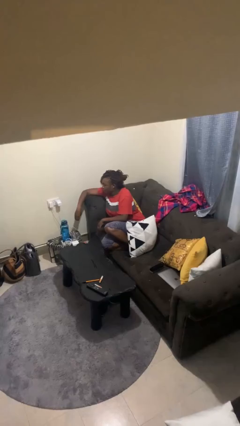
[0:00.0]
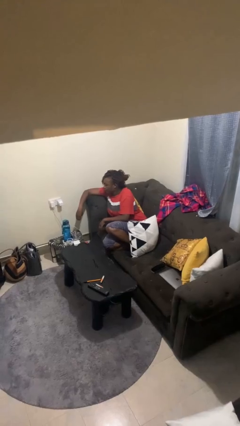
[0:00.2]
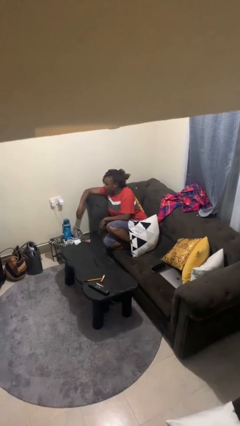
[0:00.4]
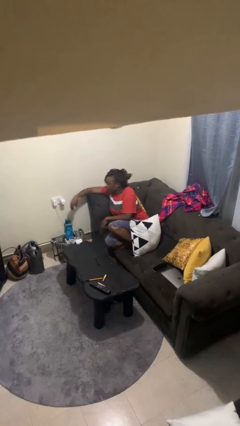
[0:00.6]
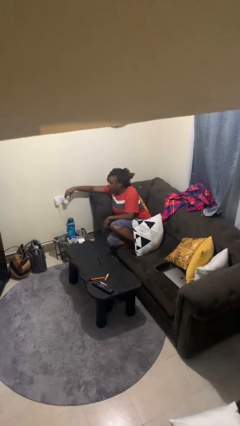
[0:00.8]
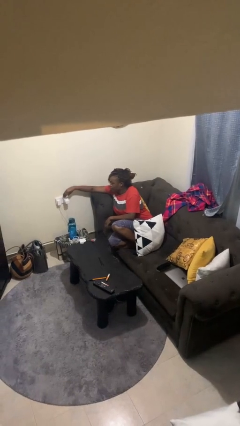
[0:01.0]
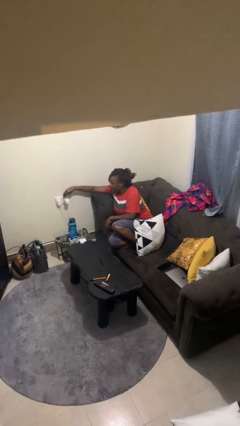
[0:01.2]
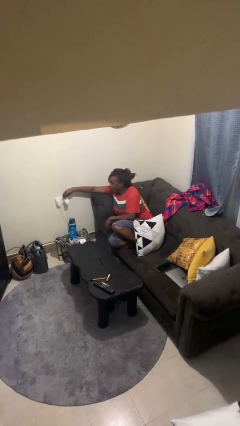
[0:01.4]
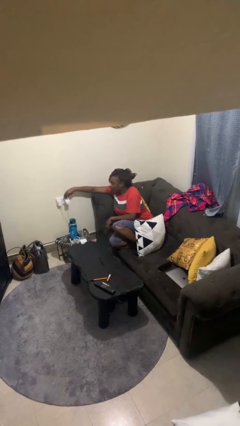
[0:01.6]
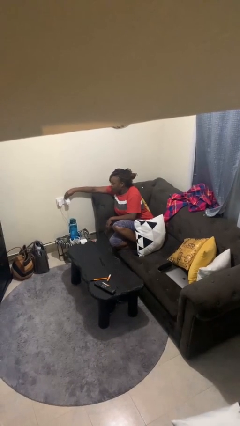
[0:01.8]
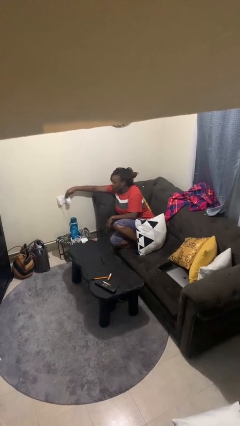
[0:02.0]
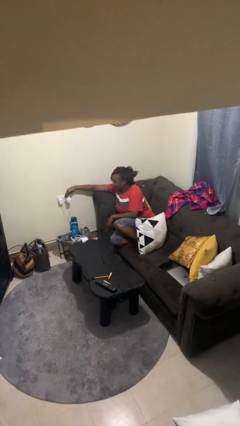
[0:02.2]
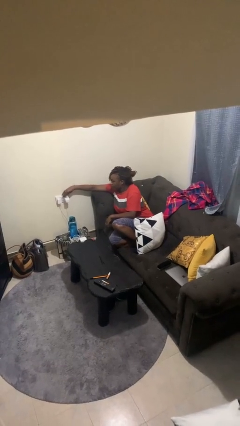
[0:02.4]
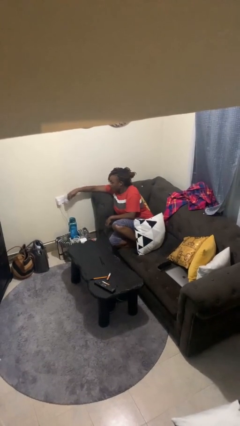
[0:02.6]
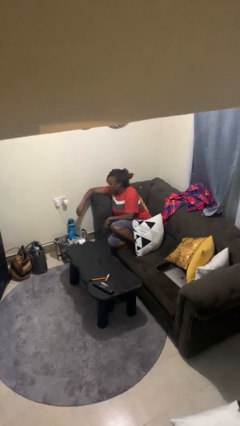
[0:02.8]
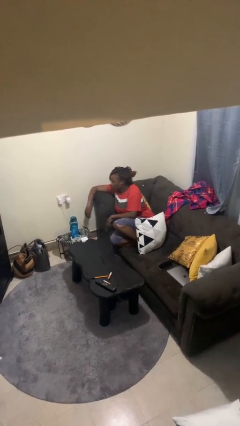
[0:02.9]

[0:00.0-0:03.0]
person plugs into electrical socket

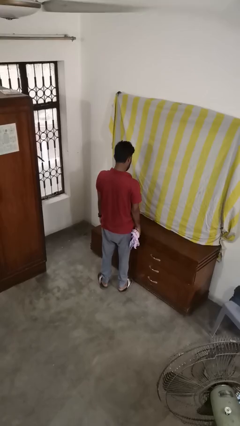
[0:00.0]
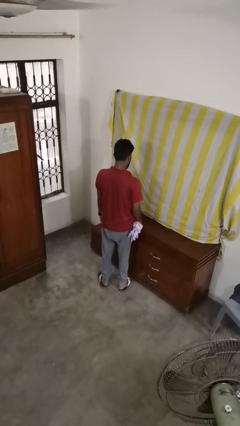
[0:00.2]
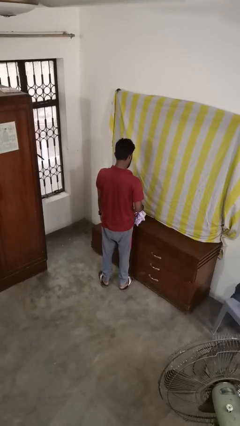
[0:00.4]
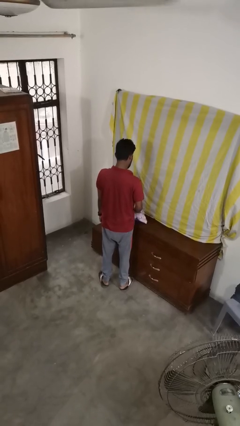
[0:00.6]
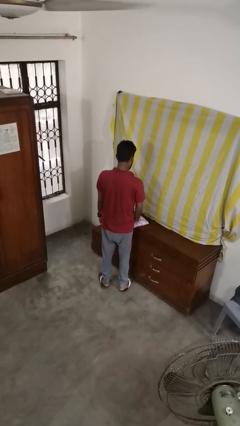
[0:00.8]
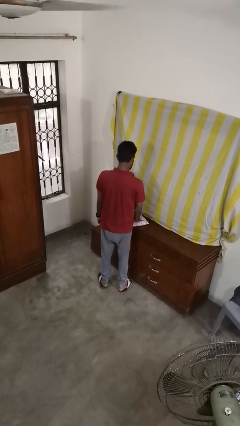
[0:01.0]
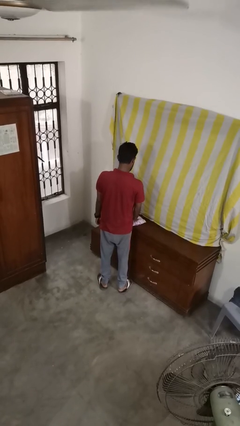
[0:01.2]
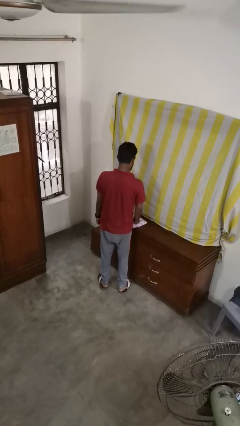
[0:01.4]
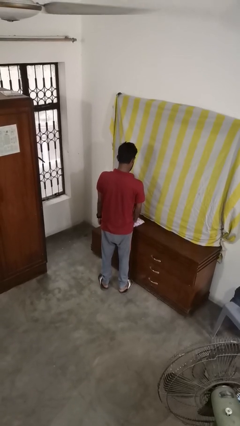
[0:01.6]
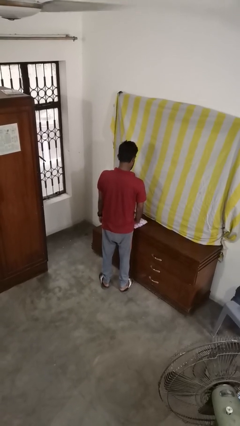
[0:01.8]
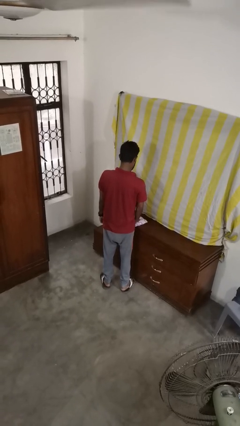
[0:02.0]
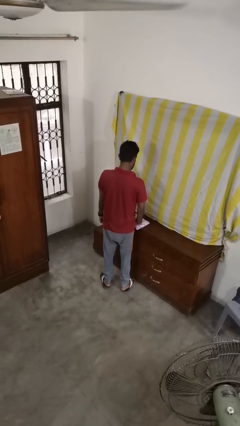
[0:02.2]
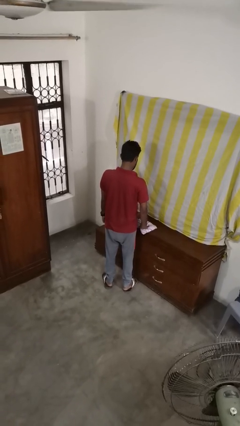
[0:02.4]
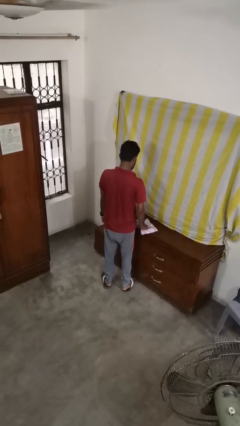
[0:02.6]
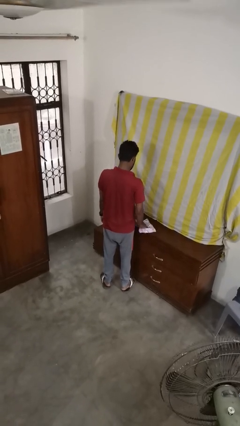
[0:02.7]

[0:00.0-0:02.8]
person cleans table with rag

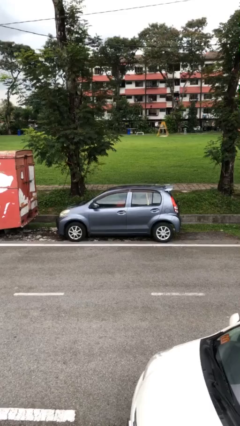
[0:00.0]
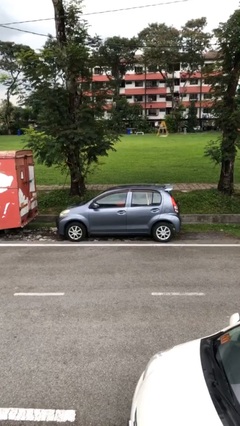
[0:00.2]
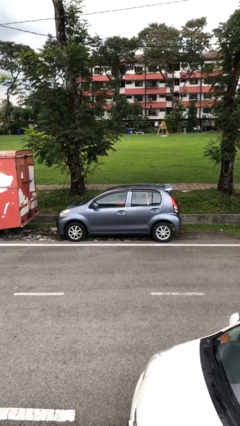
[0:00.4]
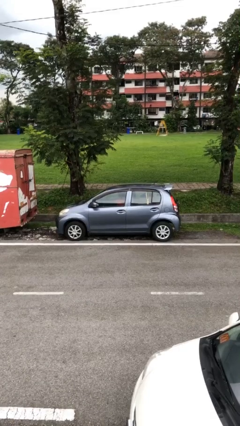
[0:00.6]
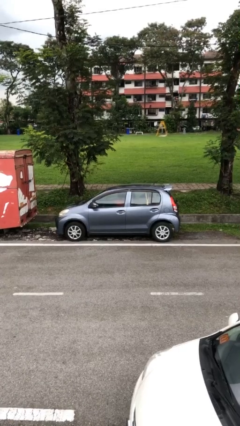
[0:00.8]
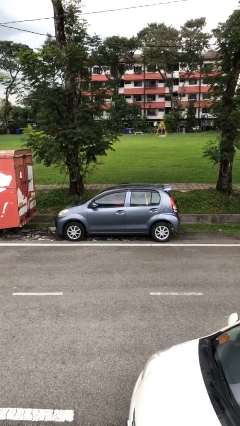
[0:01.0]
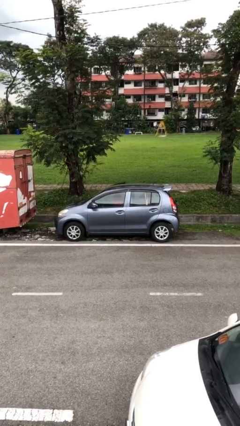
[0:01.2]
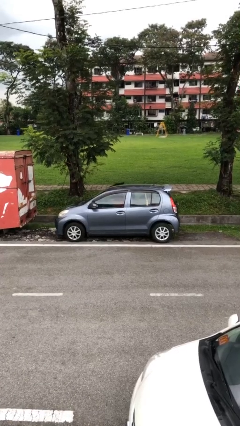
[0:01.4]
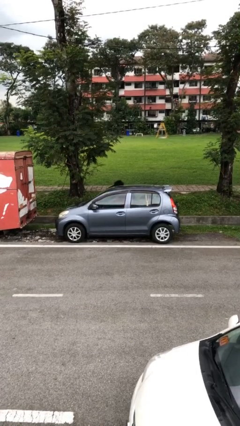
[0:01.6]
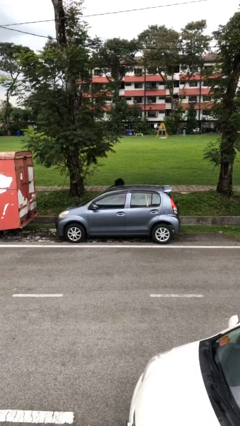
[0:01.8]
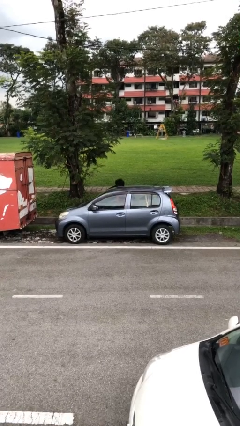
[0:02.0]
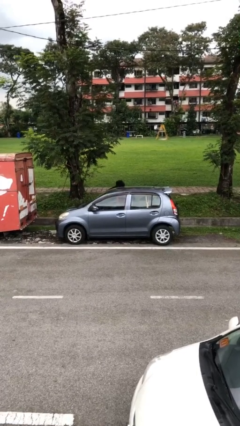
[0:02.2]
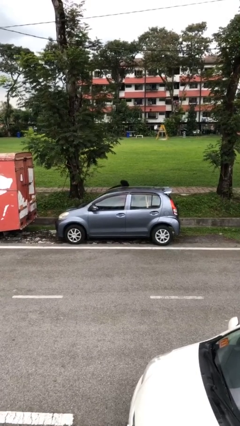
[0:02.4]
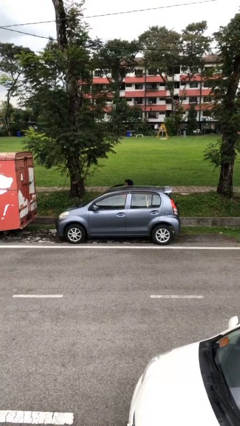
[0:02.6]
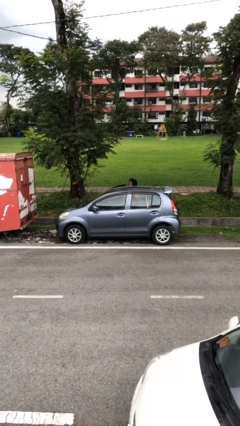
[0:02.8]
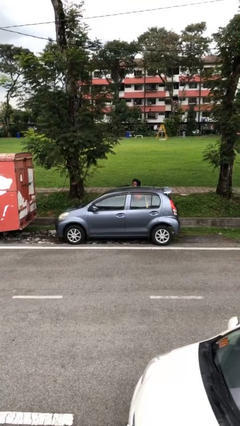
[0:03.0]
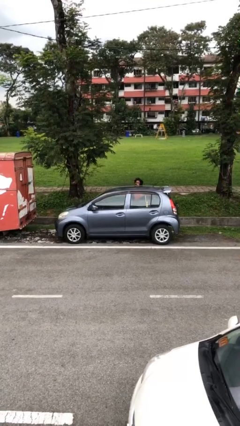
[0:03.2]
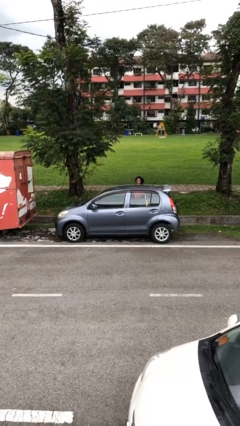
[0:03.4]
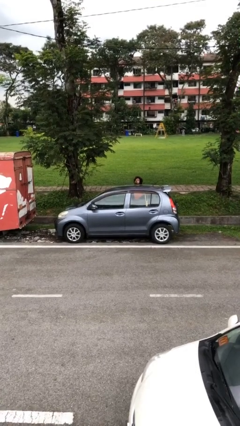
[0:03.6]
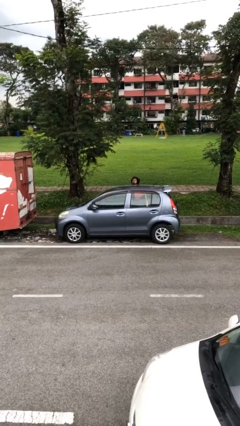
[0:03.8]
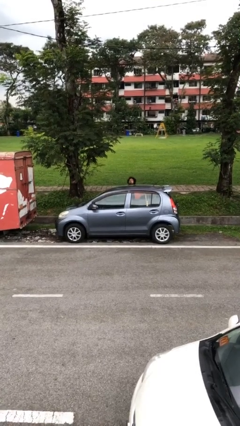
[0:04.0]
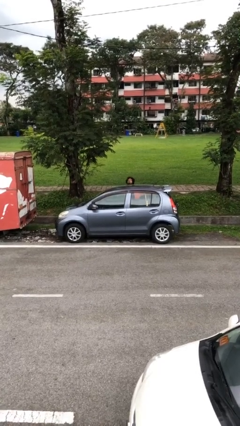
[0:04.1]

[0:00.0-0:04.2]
car drops off person

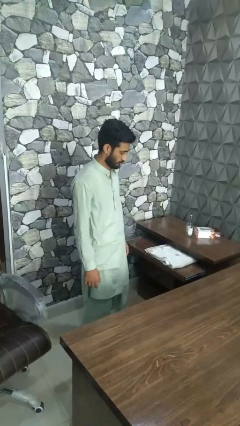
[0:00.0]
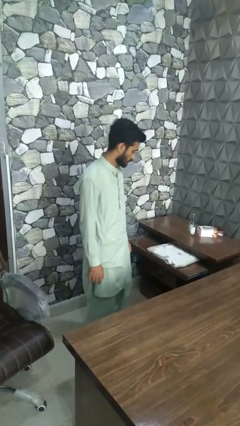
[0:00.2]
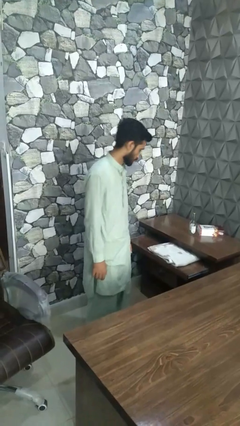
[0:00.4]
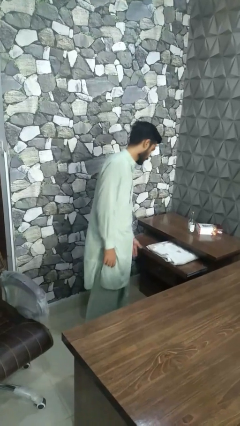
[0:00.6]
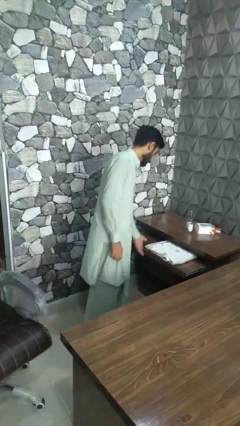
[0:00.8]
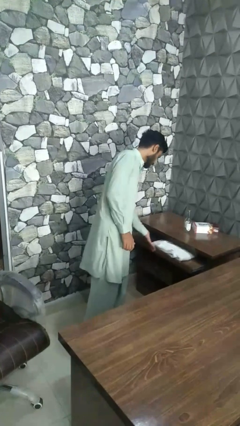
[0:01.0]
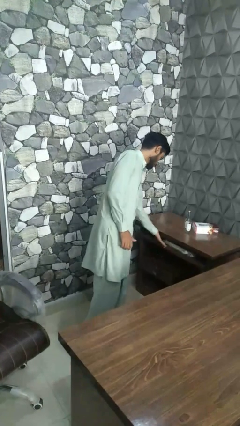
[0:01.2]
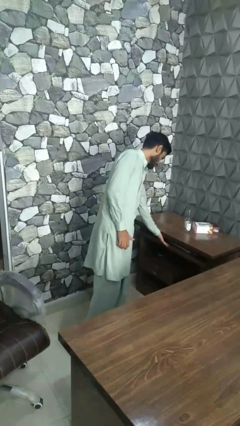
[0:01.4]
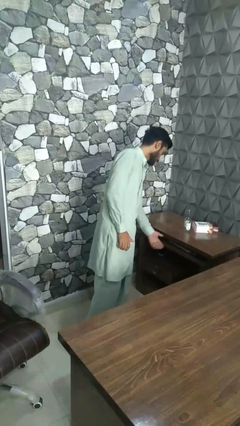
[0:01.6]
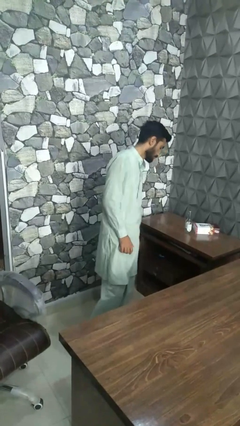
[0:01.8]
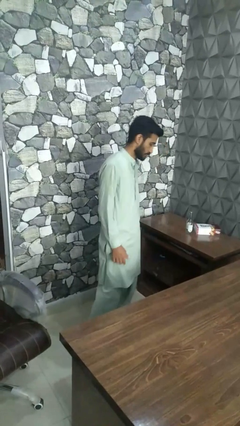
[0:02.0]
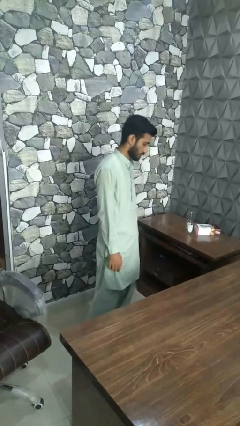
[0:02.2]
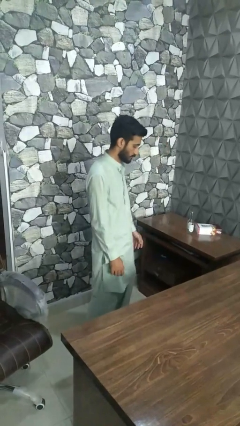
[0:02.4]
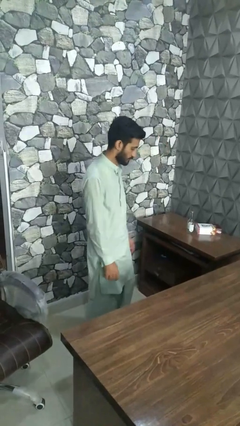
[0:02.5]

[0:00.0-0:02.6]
person closes dresser drawer

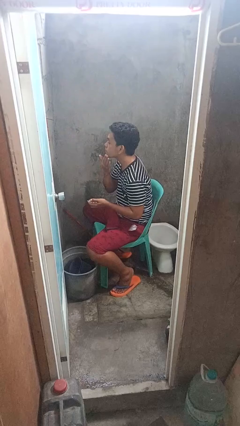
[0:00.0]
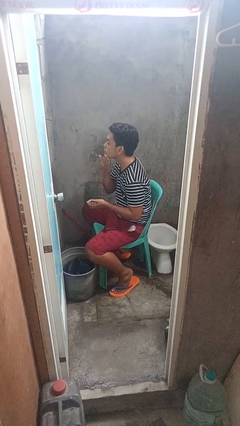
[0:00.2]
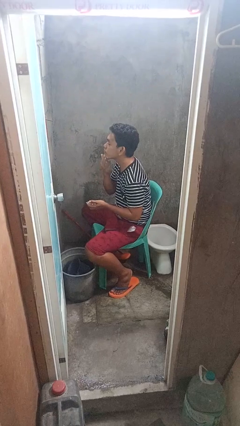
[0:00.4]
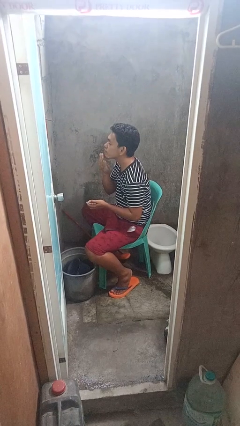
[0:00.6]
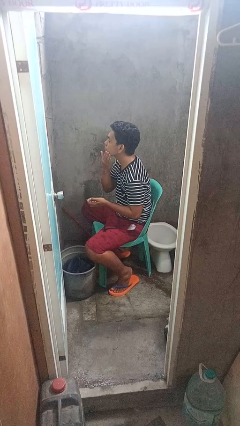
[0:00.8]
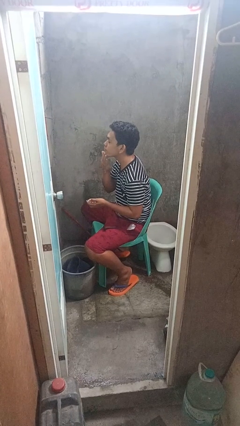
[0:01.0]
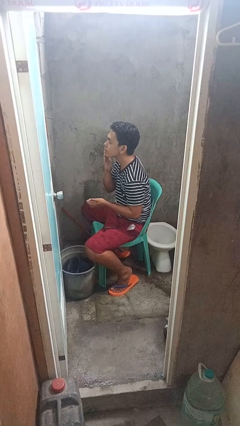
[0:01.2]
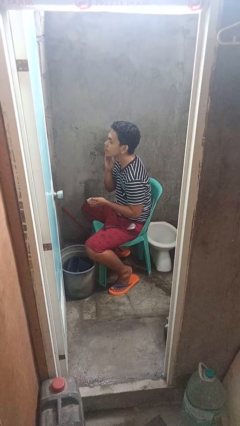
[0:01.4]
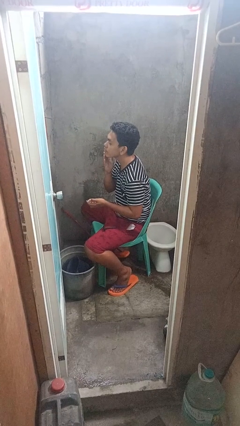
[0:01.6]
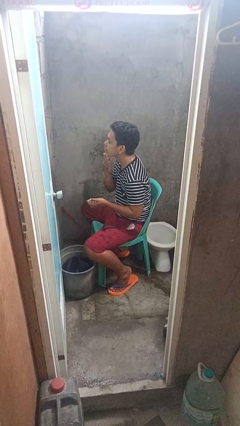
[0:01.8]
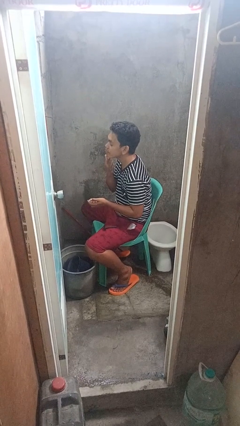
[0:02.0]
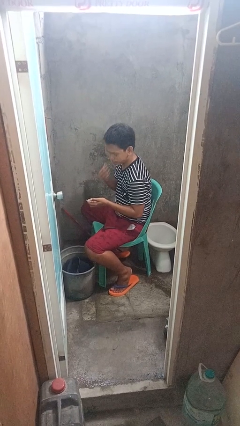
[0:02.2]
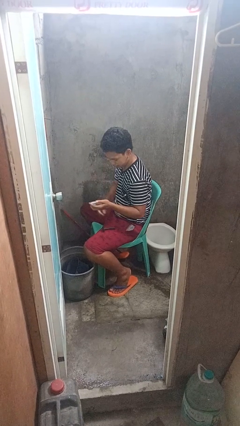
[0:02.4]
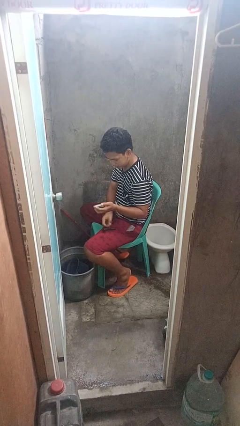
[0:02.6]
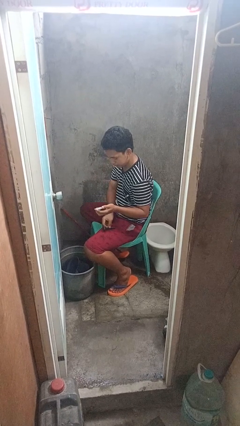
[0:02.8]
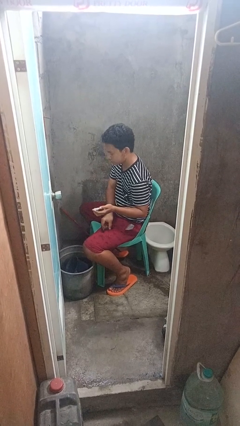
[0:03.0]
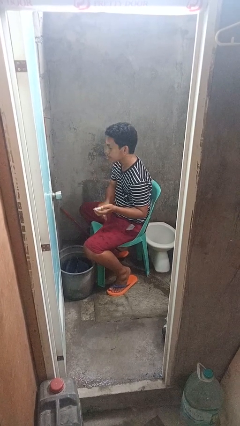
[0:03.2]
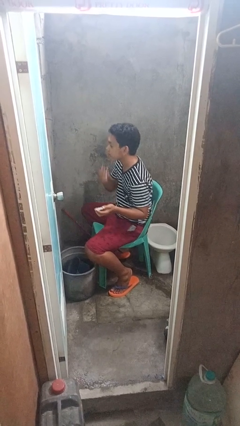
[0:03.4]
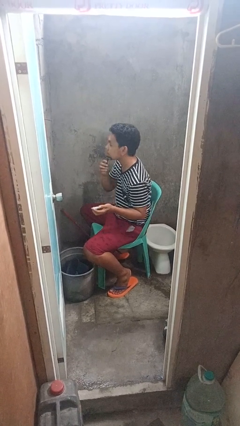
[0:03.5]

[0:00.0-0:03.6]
person applies shaving cream

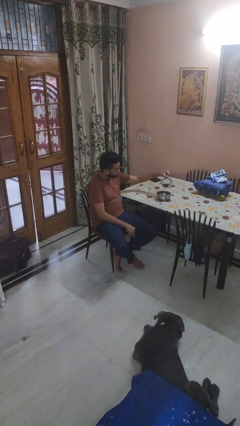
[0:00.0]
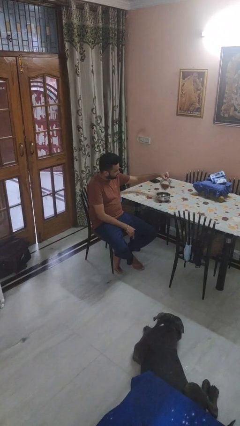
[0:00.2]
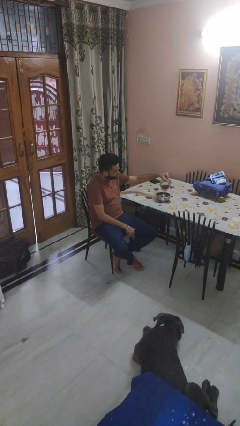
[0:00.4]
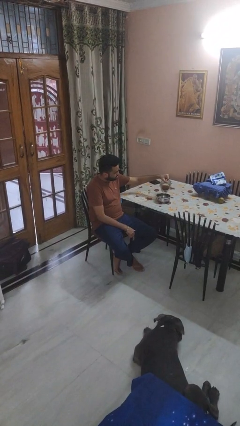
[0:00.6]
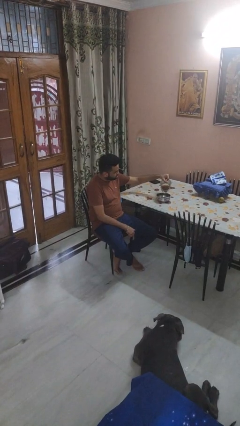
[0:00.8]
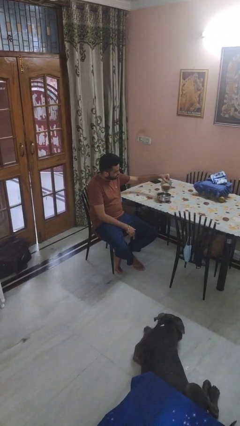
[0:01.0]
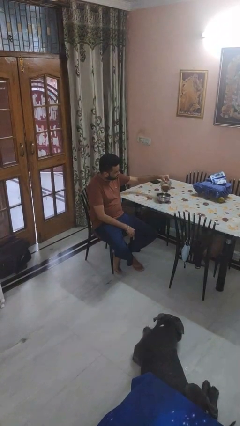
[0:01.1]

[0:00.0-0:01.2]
person pours into bowl
